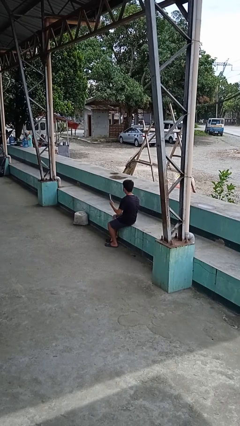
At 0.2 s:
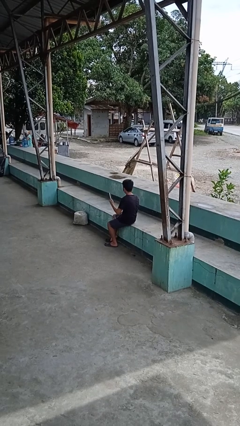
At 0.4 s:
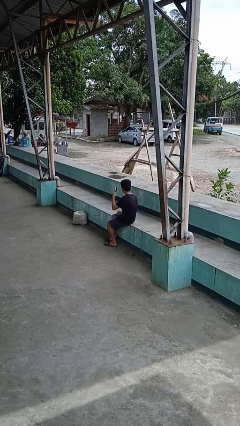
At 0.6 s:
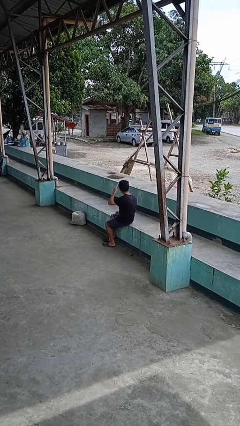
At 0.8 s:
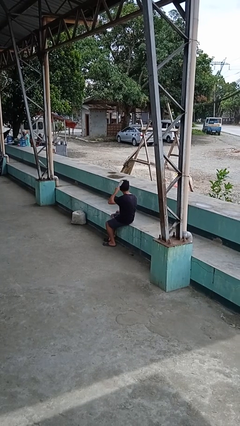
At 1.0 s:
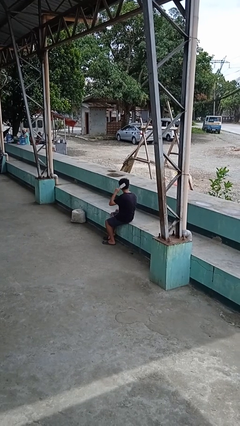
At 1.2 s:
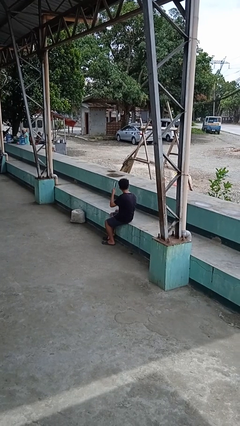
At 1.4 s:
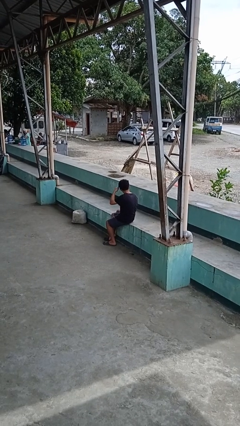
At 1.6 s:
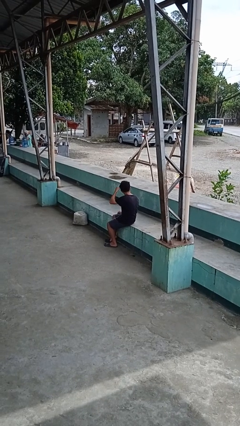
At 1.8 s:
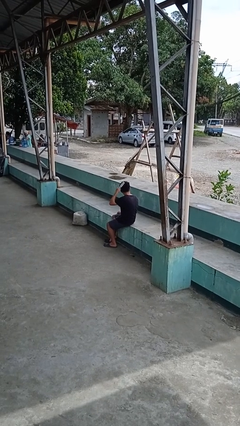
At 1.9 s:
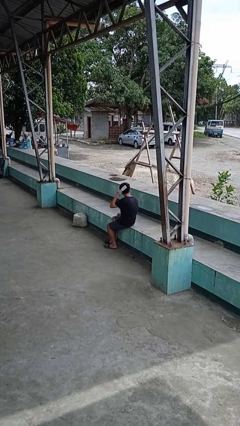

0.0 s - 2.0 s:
person brushes hair

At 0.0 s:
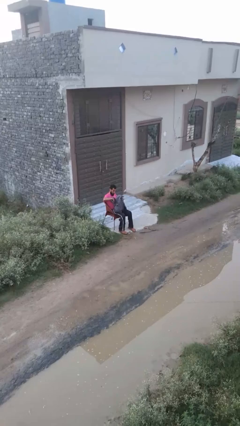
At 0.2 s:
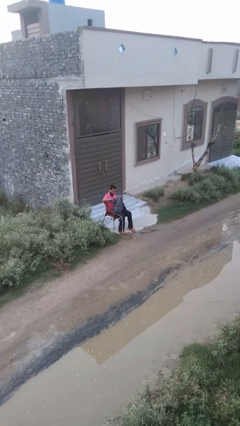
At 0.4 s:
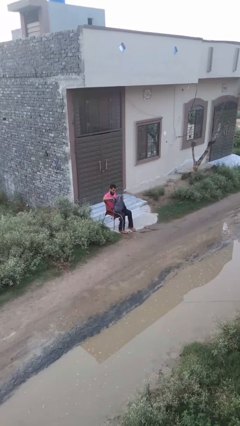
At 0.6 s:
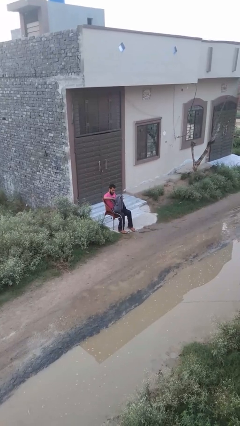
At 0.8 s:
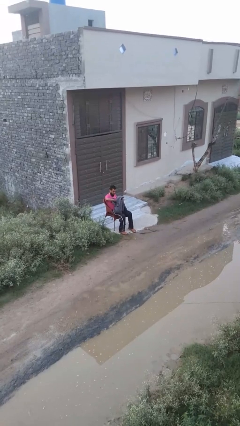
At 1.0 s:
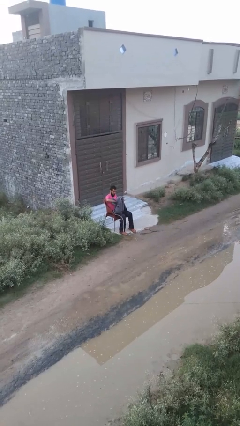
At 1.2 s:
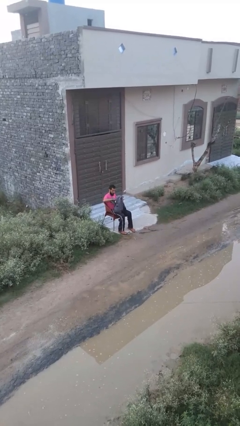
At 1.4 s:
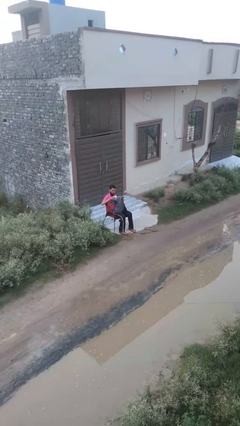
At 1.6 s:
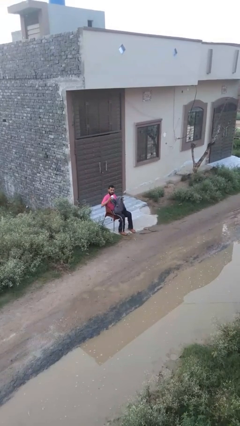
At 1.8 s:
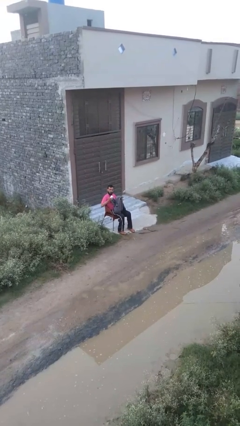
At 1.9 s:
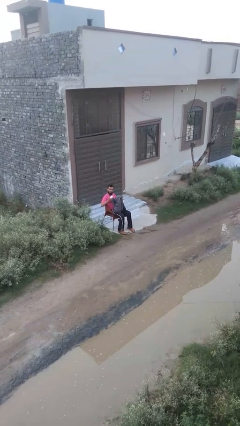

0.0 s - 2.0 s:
person takes object from backpack

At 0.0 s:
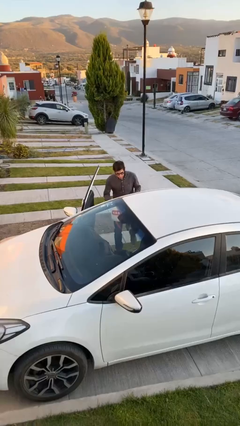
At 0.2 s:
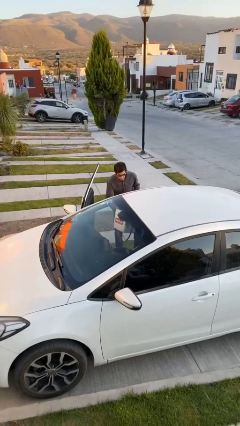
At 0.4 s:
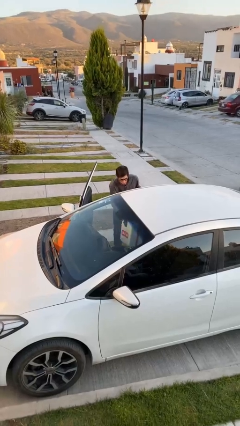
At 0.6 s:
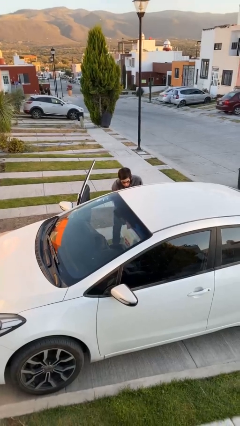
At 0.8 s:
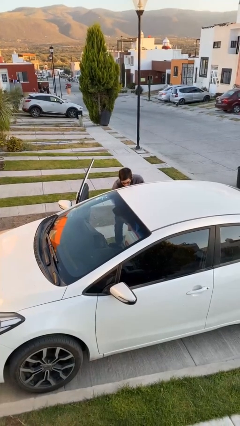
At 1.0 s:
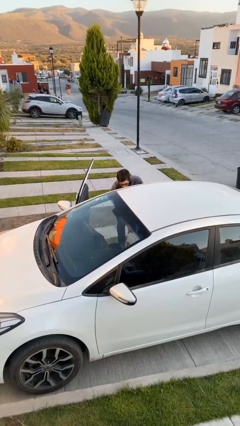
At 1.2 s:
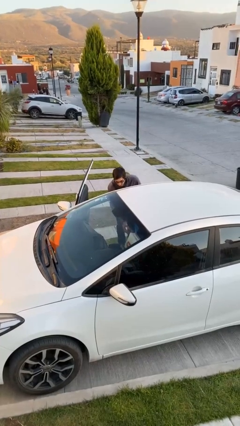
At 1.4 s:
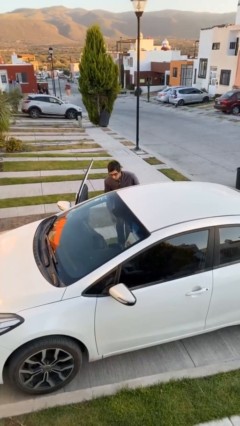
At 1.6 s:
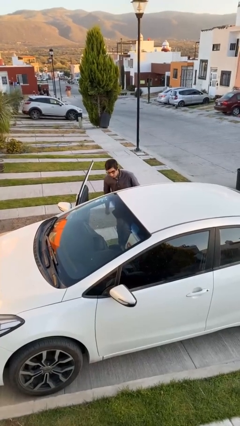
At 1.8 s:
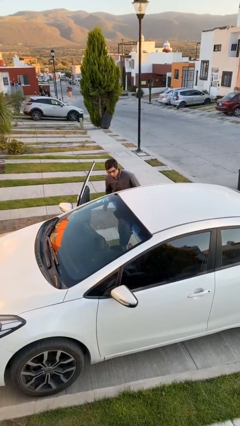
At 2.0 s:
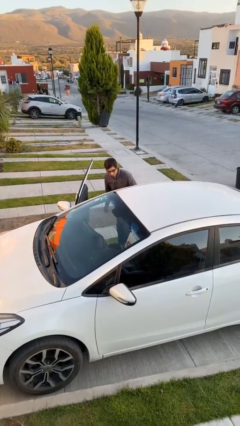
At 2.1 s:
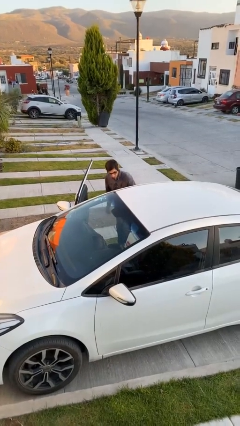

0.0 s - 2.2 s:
person loads car

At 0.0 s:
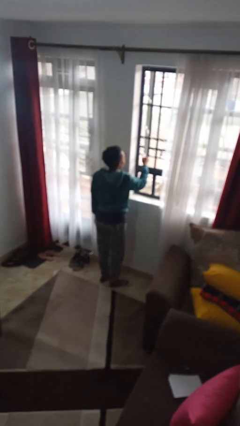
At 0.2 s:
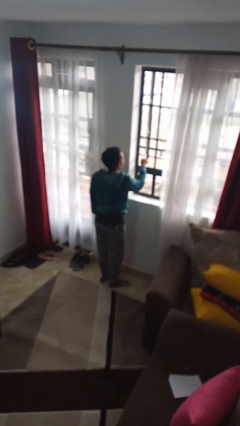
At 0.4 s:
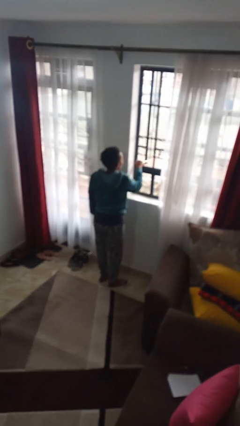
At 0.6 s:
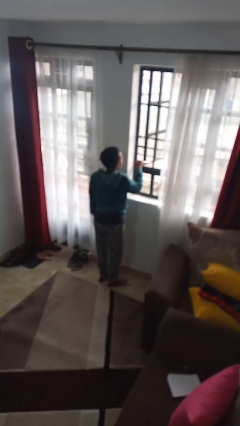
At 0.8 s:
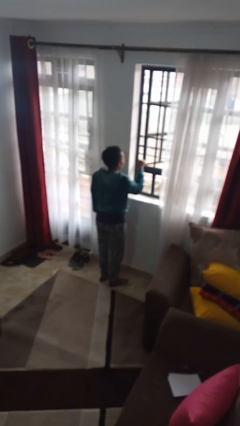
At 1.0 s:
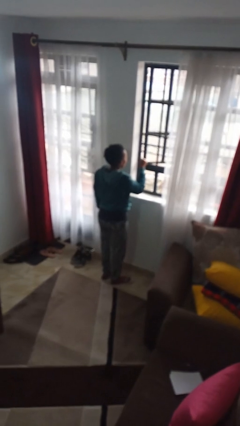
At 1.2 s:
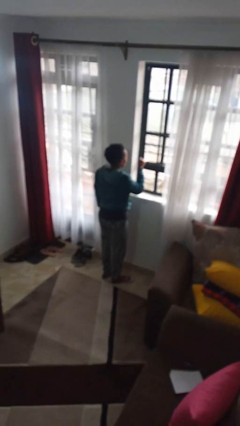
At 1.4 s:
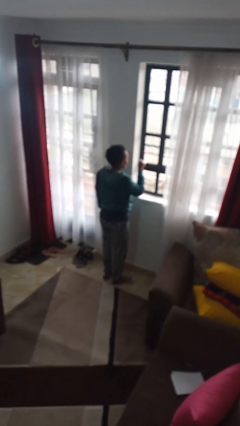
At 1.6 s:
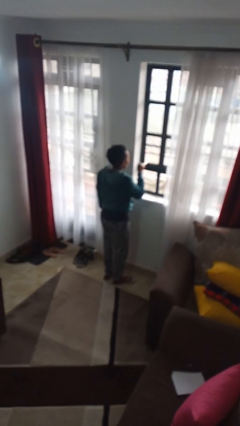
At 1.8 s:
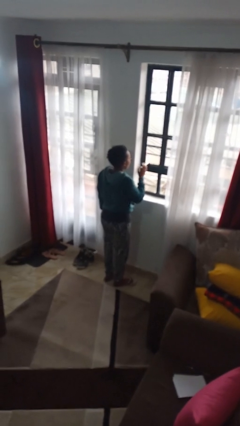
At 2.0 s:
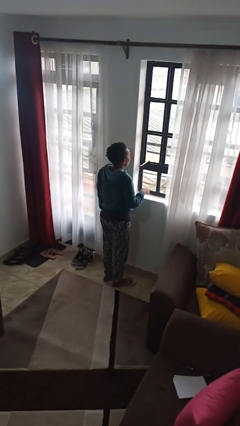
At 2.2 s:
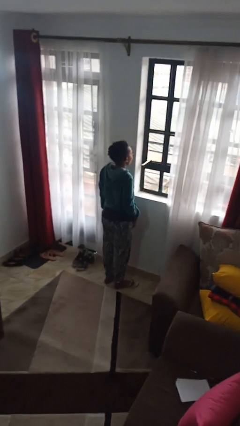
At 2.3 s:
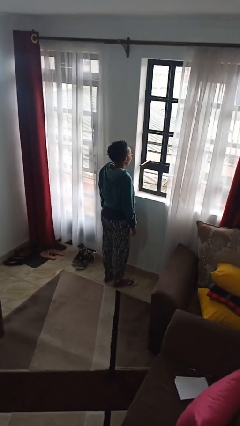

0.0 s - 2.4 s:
person closes home window

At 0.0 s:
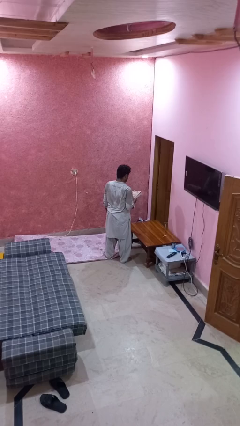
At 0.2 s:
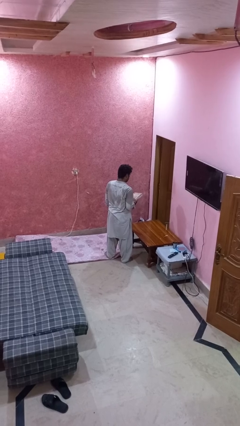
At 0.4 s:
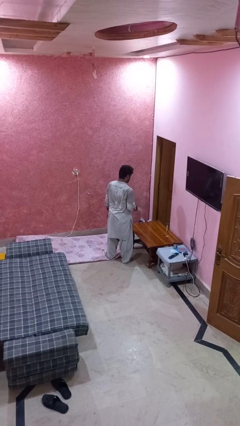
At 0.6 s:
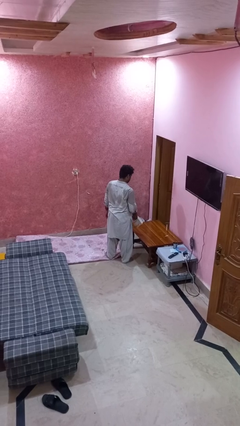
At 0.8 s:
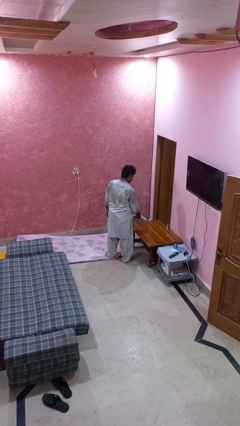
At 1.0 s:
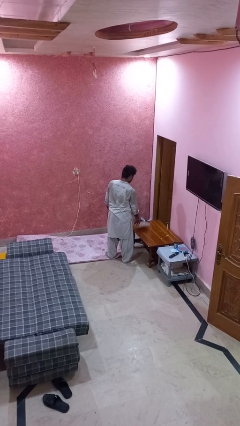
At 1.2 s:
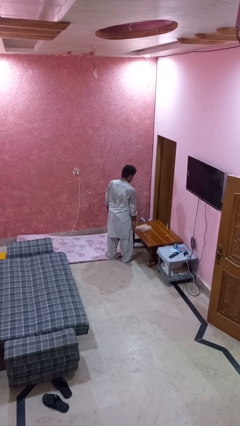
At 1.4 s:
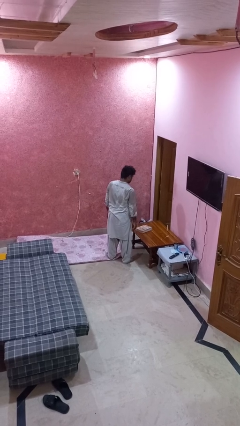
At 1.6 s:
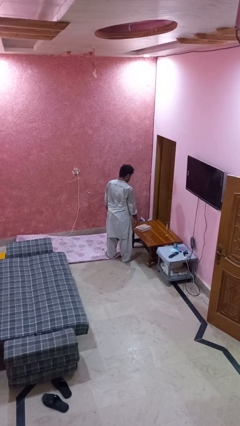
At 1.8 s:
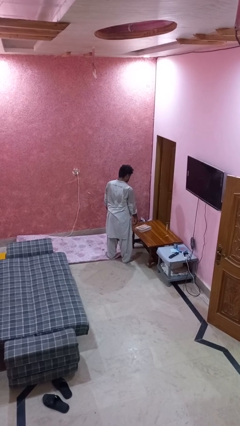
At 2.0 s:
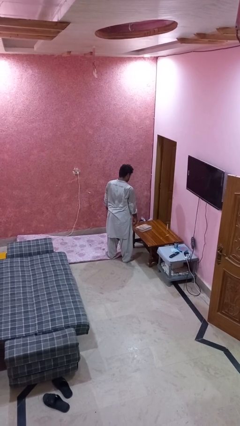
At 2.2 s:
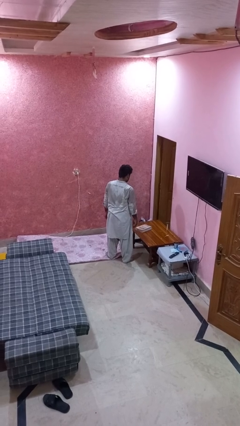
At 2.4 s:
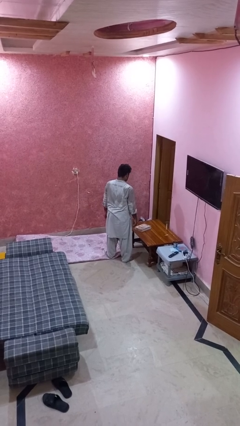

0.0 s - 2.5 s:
person throws object on table

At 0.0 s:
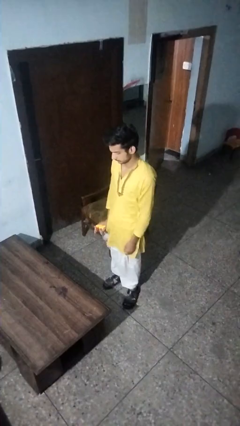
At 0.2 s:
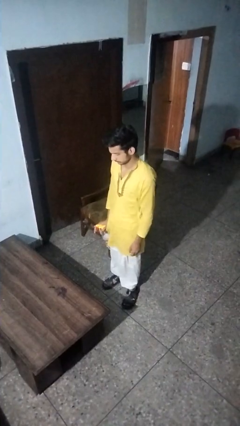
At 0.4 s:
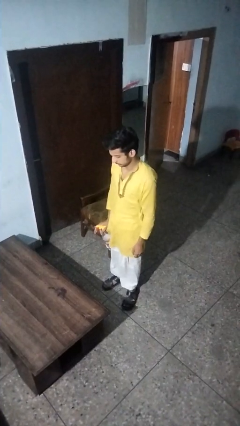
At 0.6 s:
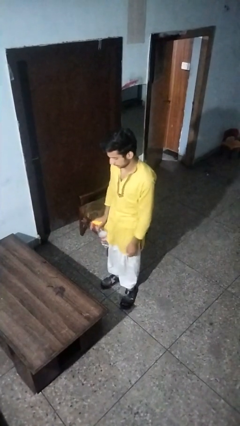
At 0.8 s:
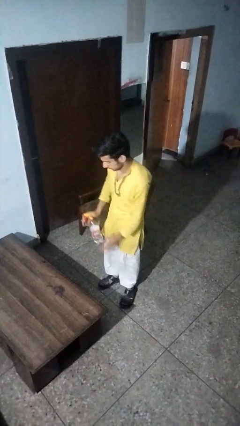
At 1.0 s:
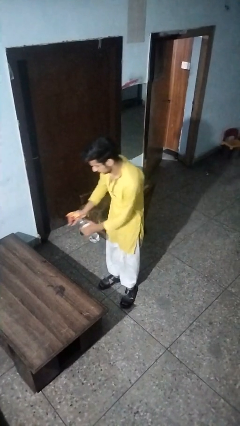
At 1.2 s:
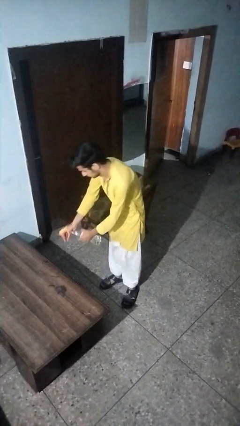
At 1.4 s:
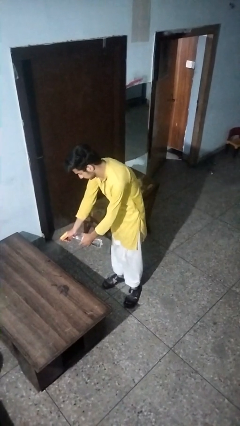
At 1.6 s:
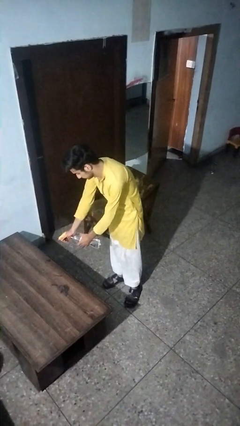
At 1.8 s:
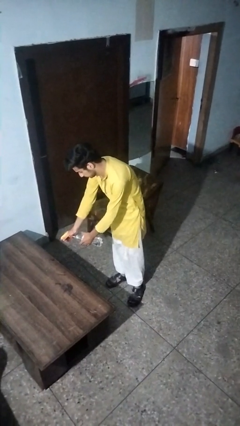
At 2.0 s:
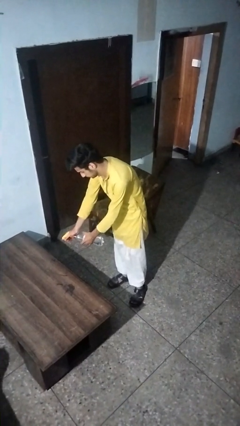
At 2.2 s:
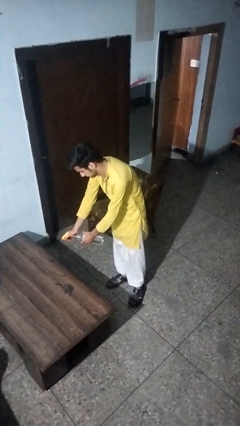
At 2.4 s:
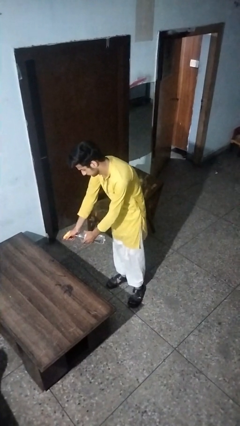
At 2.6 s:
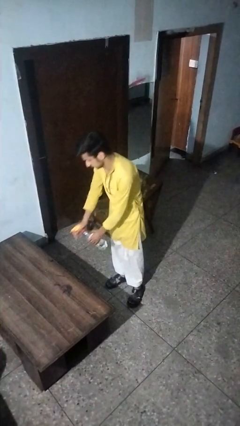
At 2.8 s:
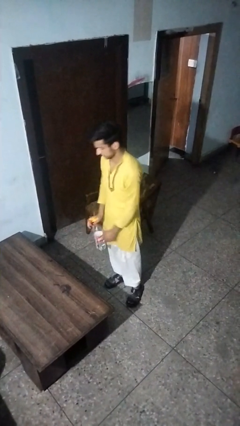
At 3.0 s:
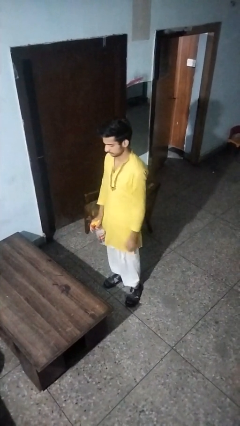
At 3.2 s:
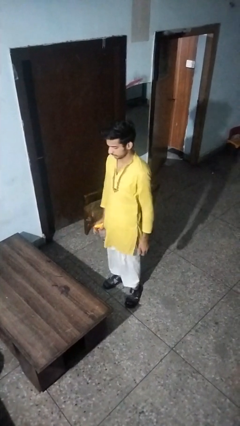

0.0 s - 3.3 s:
person sprays from bottle

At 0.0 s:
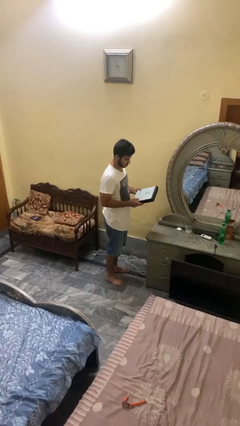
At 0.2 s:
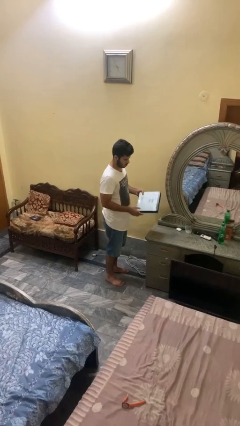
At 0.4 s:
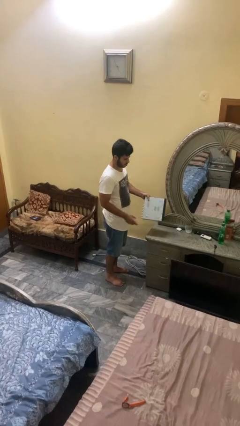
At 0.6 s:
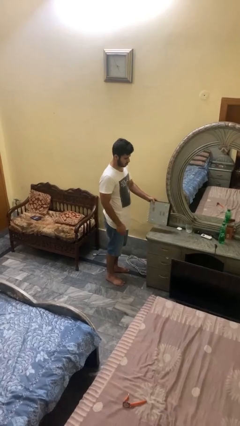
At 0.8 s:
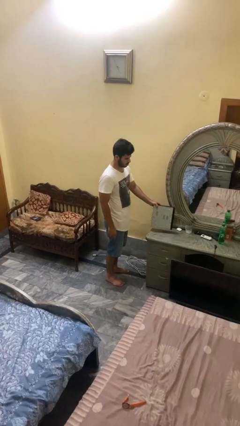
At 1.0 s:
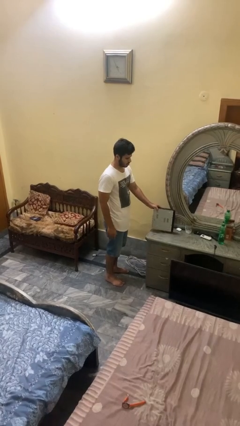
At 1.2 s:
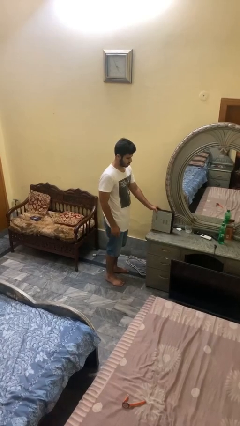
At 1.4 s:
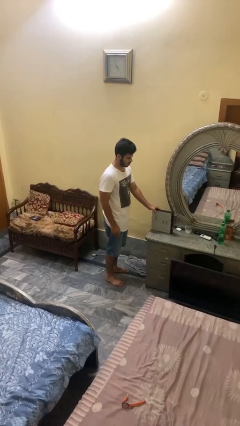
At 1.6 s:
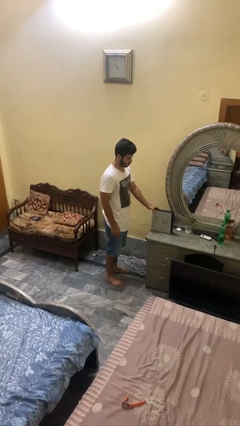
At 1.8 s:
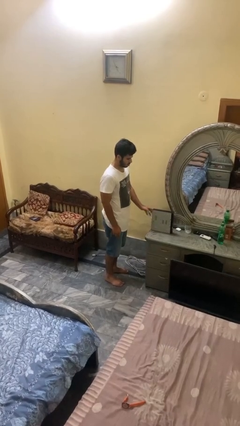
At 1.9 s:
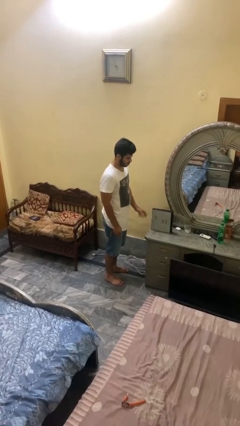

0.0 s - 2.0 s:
person puts down object on countertop

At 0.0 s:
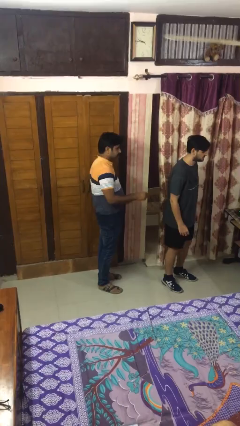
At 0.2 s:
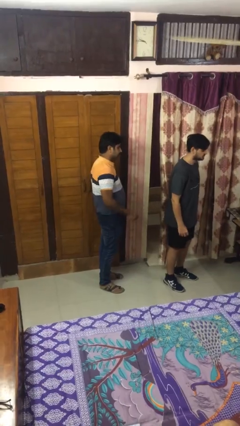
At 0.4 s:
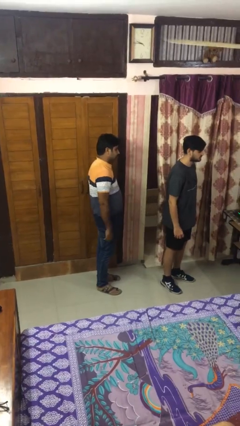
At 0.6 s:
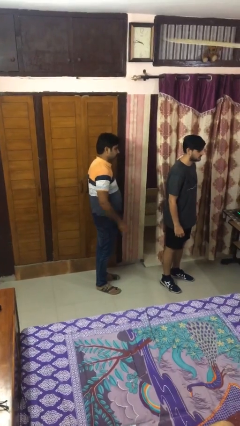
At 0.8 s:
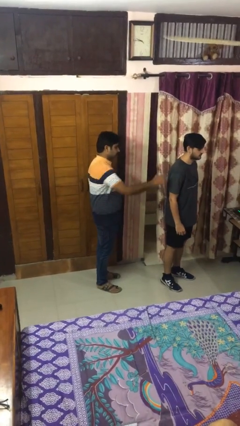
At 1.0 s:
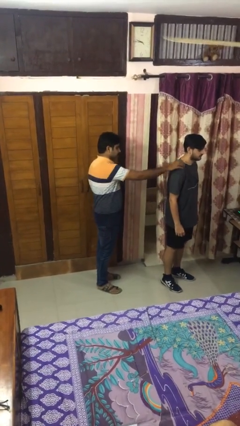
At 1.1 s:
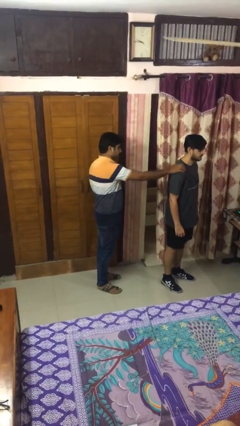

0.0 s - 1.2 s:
person grabs person by shoulder
